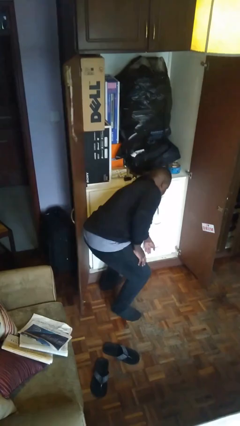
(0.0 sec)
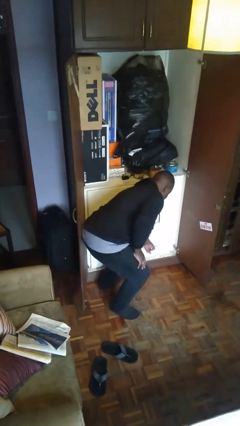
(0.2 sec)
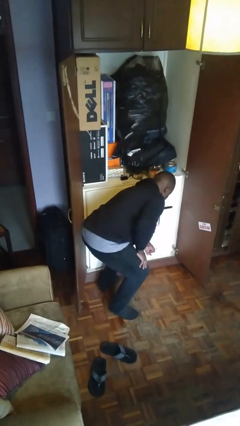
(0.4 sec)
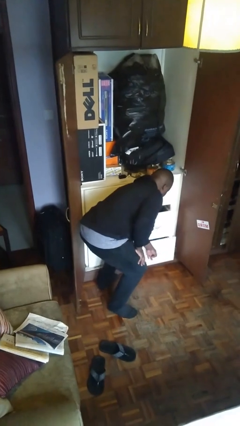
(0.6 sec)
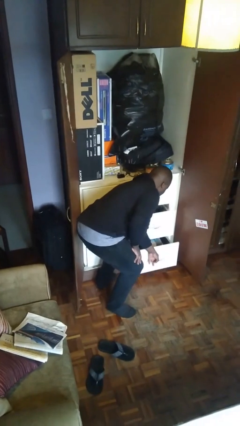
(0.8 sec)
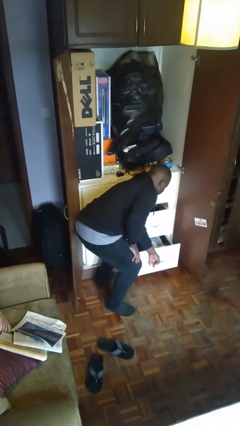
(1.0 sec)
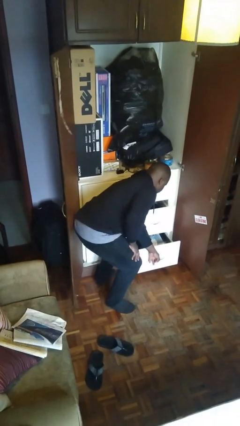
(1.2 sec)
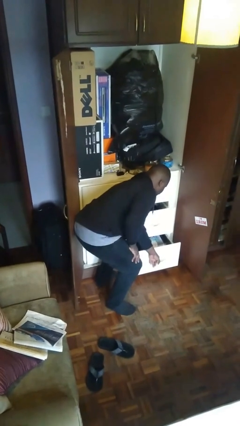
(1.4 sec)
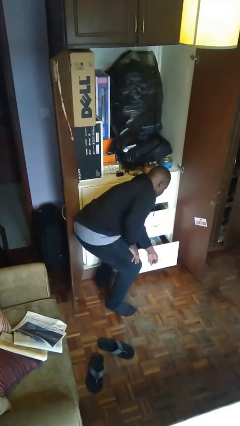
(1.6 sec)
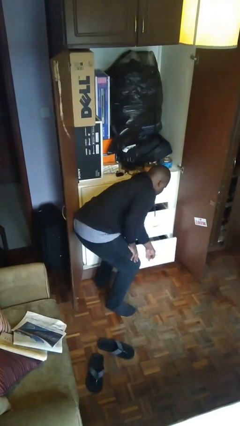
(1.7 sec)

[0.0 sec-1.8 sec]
person opens dresser drawer

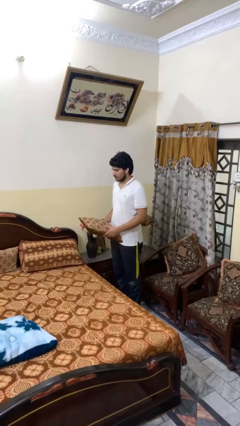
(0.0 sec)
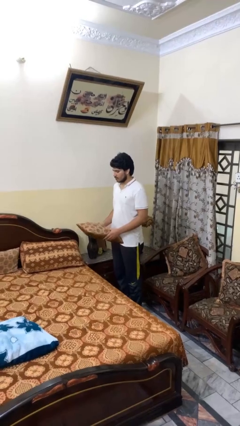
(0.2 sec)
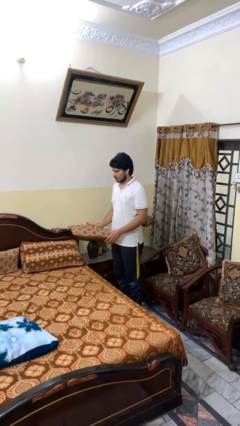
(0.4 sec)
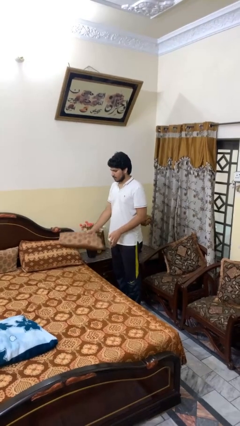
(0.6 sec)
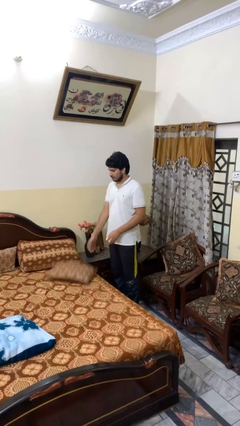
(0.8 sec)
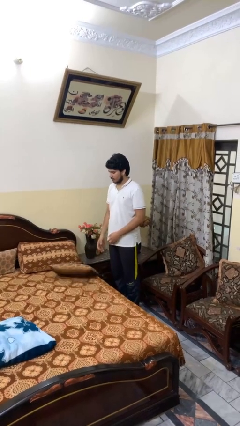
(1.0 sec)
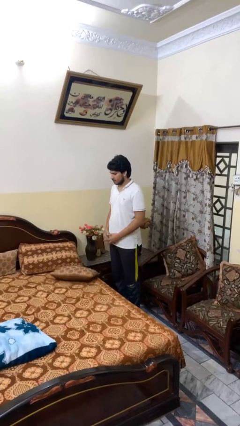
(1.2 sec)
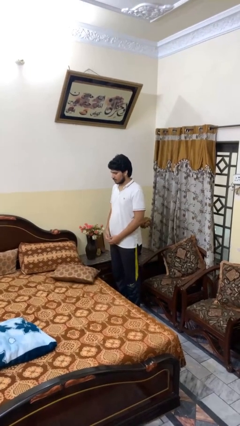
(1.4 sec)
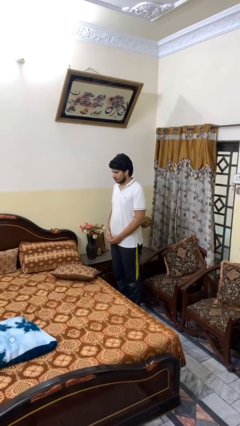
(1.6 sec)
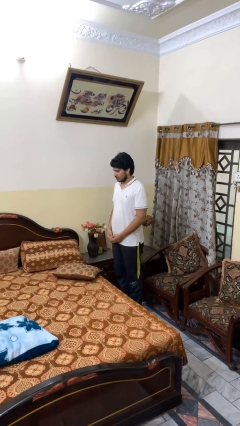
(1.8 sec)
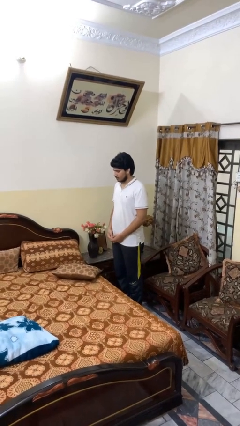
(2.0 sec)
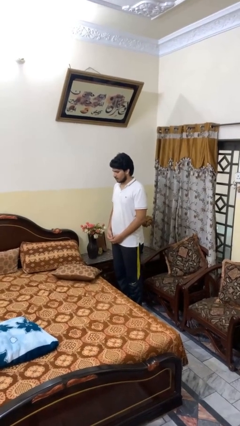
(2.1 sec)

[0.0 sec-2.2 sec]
person puts down object on bed

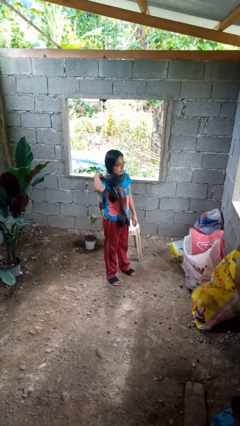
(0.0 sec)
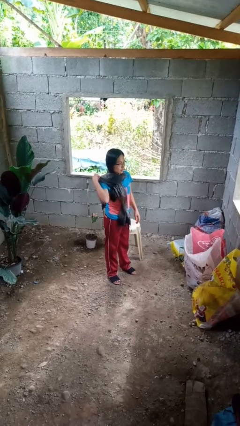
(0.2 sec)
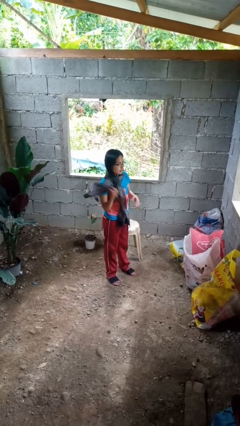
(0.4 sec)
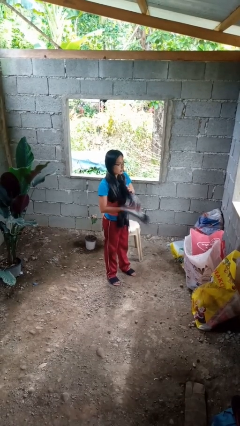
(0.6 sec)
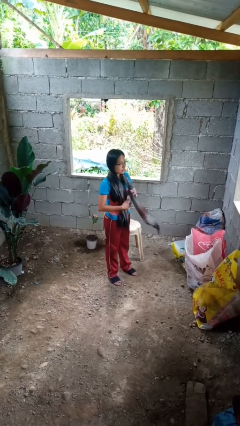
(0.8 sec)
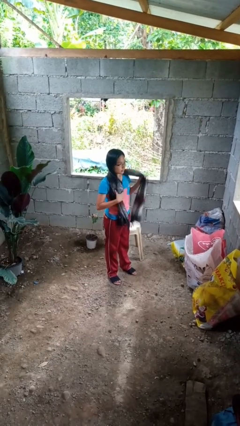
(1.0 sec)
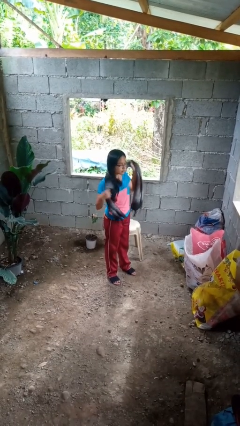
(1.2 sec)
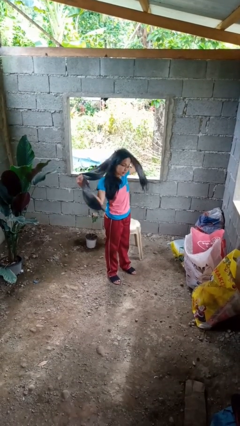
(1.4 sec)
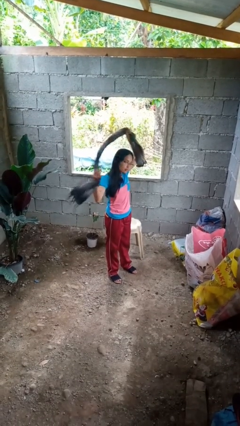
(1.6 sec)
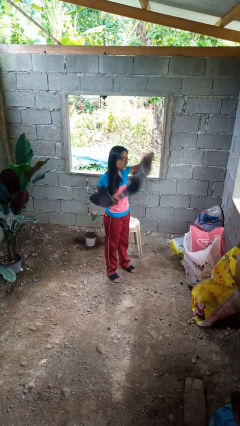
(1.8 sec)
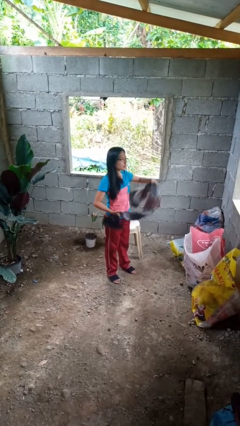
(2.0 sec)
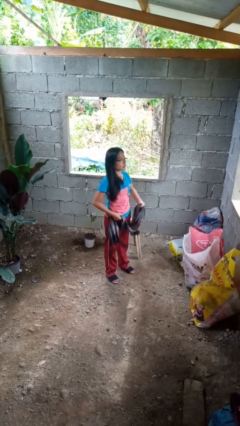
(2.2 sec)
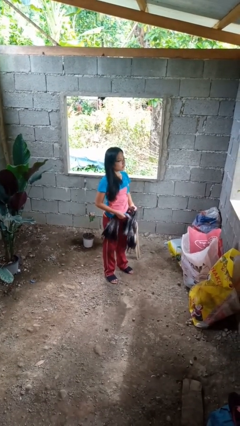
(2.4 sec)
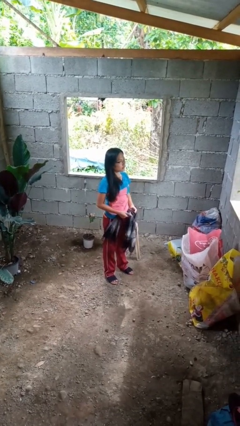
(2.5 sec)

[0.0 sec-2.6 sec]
person takes off scarf

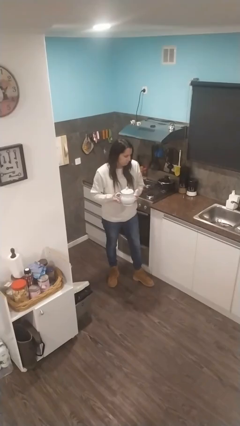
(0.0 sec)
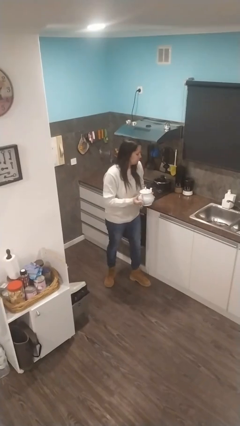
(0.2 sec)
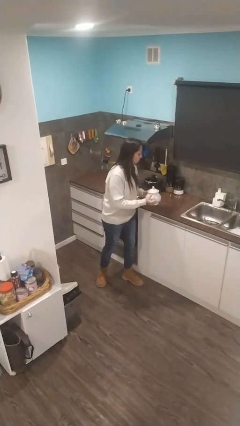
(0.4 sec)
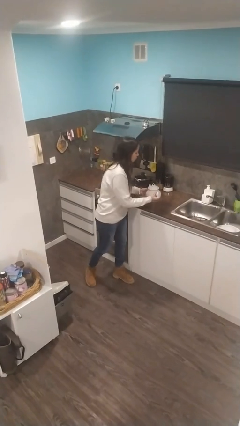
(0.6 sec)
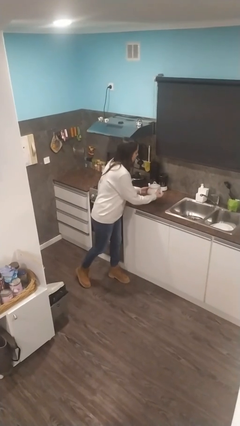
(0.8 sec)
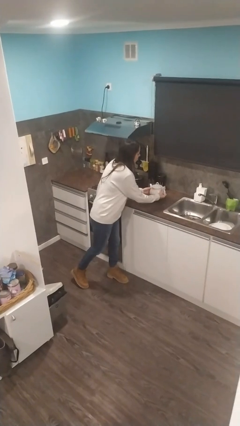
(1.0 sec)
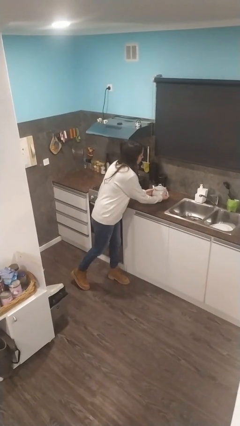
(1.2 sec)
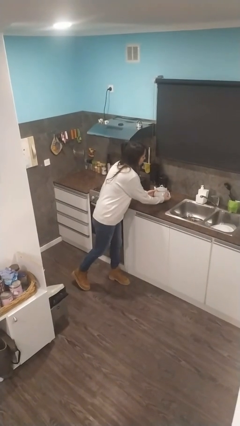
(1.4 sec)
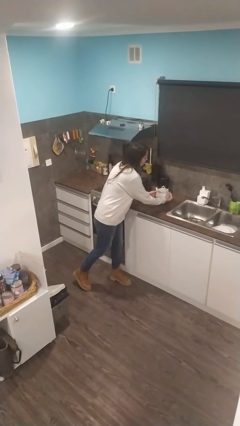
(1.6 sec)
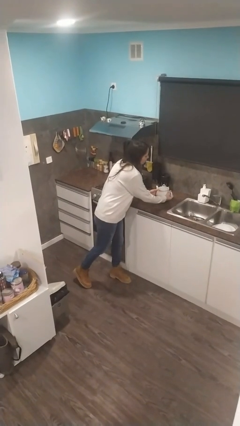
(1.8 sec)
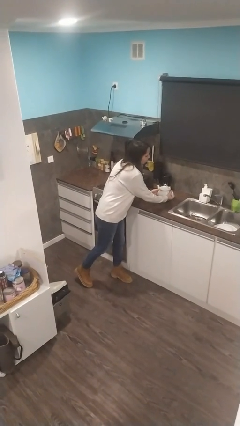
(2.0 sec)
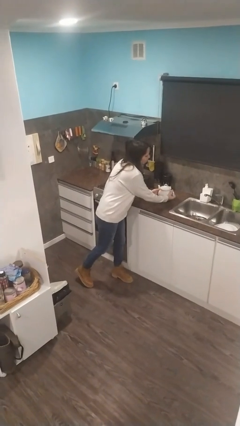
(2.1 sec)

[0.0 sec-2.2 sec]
person puts down object on countertop

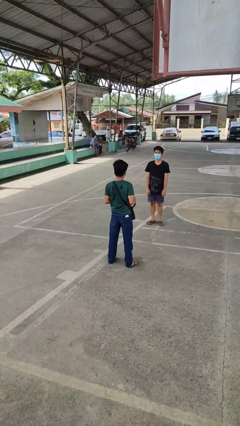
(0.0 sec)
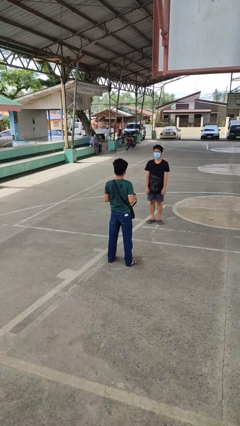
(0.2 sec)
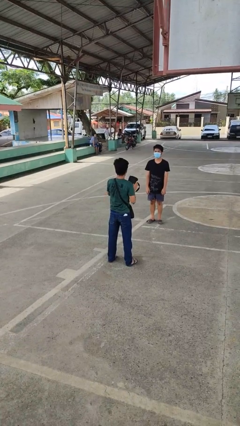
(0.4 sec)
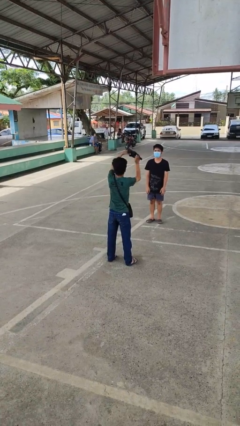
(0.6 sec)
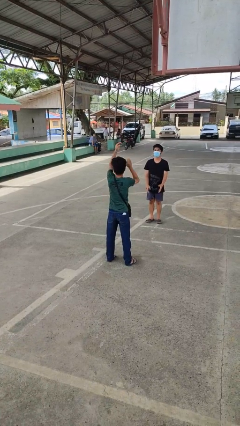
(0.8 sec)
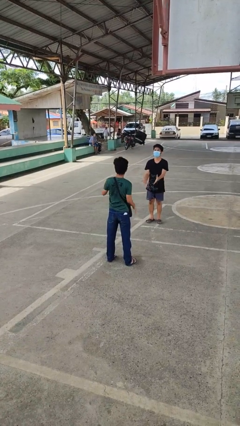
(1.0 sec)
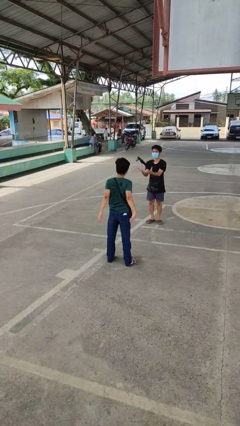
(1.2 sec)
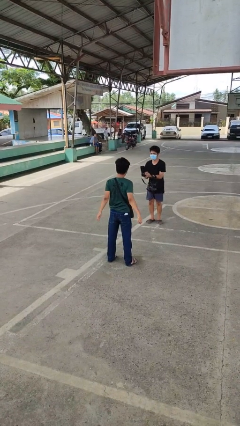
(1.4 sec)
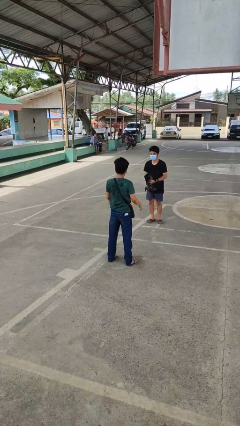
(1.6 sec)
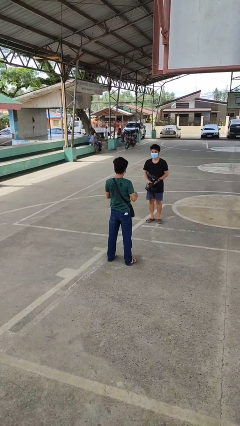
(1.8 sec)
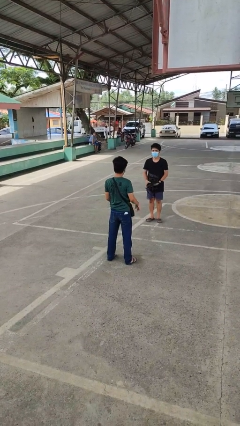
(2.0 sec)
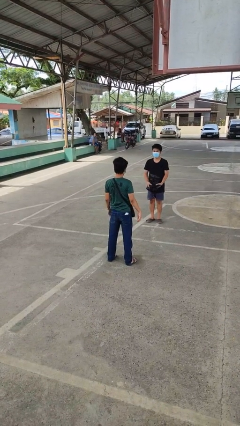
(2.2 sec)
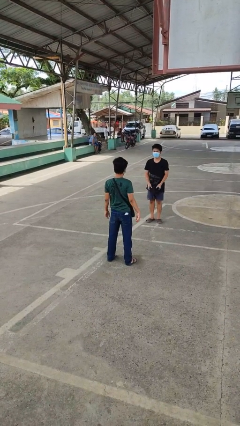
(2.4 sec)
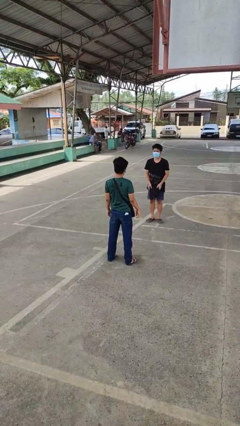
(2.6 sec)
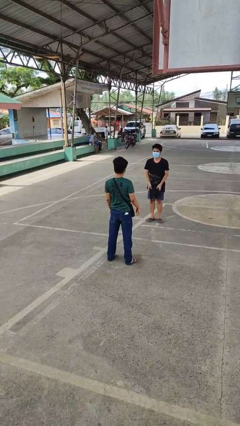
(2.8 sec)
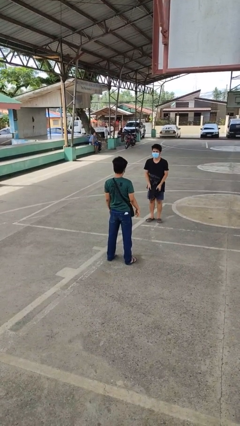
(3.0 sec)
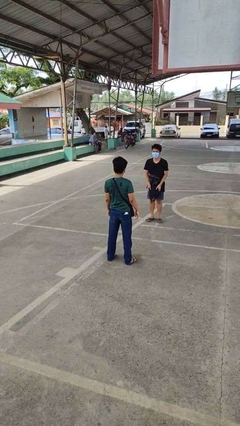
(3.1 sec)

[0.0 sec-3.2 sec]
person throws object to person

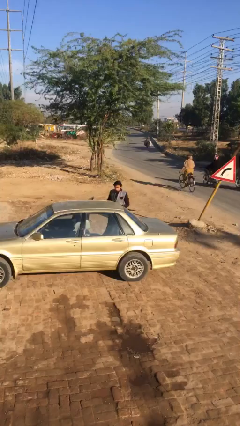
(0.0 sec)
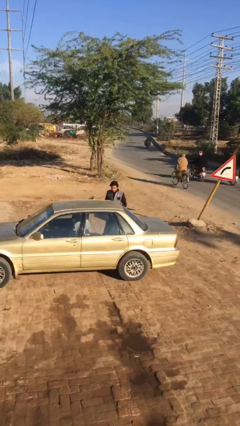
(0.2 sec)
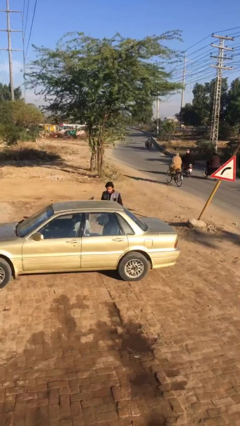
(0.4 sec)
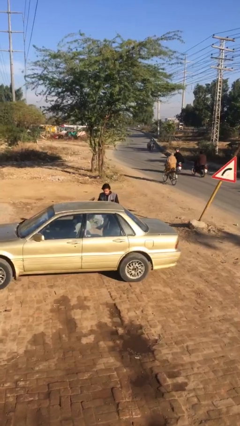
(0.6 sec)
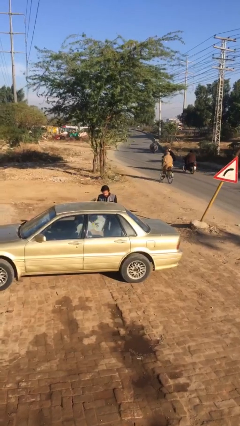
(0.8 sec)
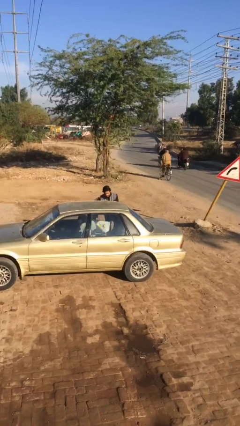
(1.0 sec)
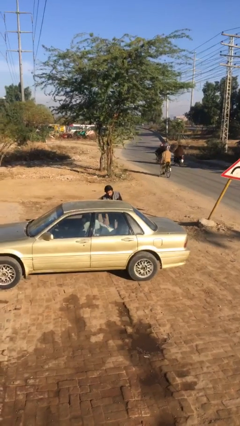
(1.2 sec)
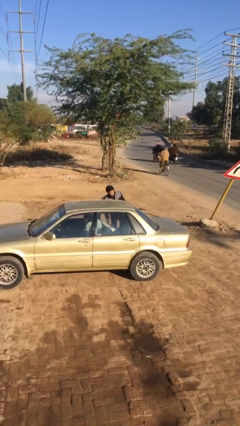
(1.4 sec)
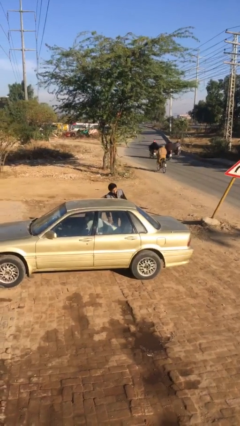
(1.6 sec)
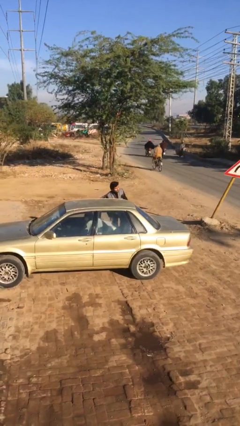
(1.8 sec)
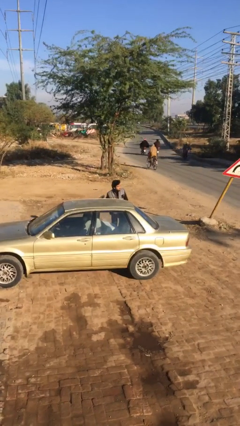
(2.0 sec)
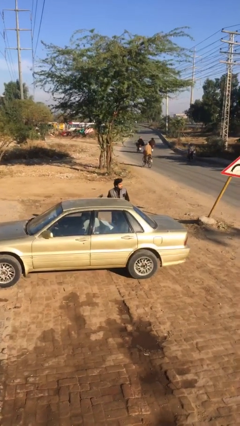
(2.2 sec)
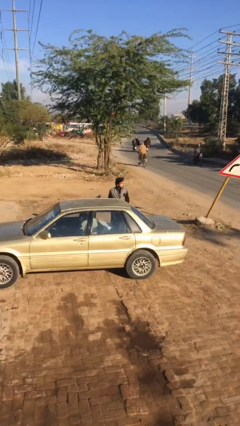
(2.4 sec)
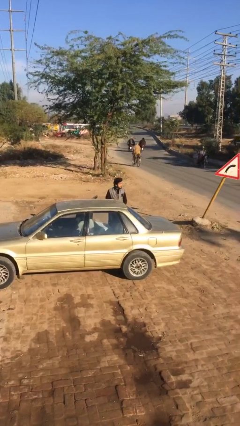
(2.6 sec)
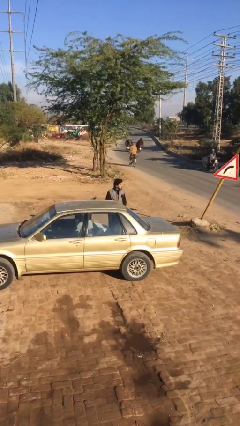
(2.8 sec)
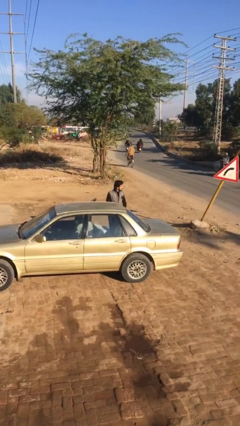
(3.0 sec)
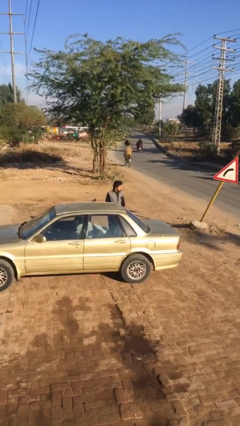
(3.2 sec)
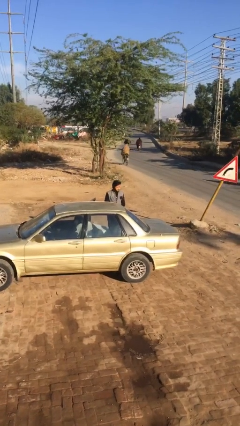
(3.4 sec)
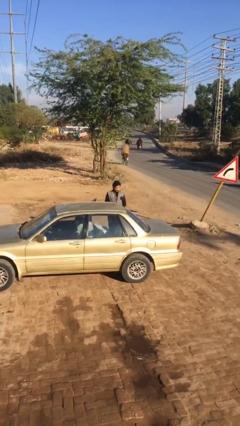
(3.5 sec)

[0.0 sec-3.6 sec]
person loads car

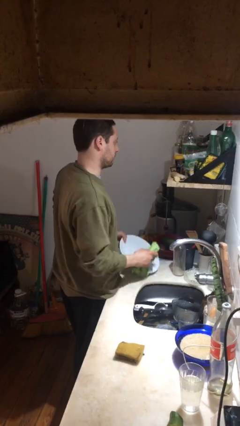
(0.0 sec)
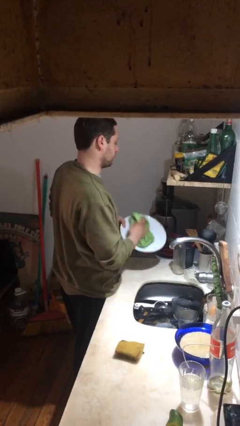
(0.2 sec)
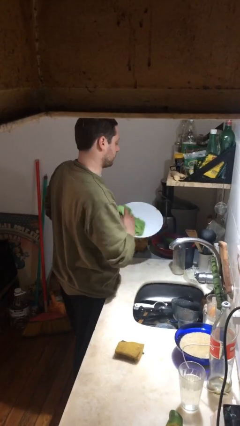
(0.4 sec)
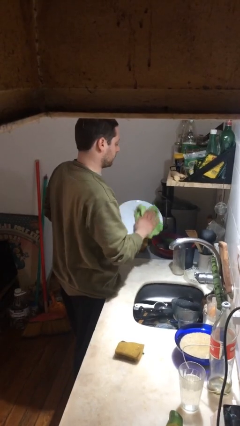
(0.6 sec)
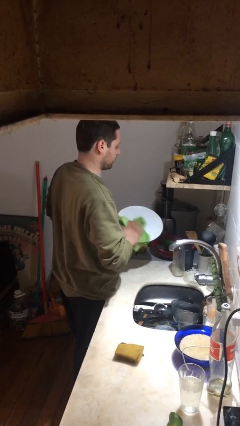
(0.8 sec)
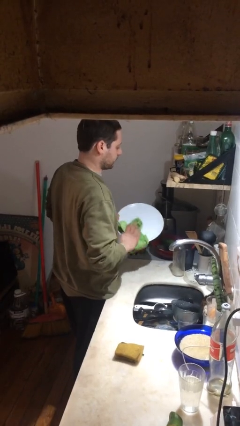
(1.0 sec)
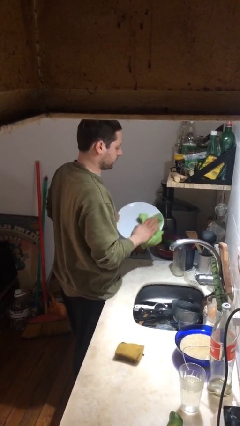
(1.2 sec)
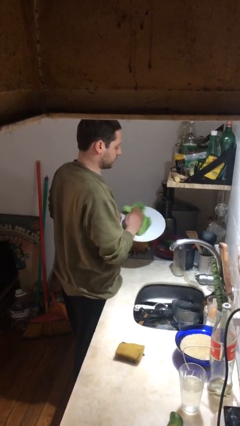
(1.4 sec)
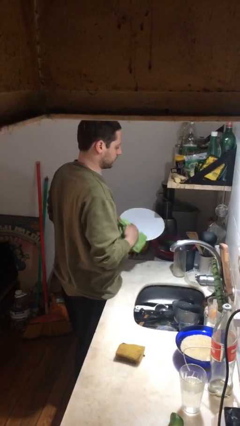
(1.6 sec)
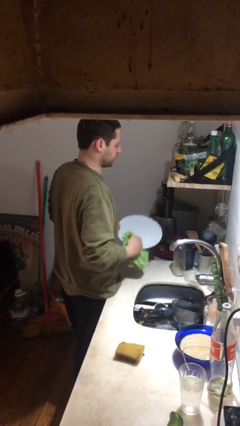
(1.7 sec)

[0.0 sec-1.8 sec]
person dries dish
